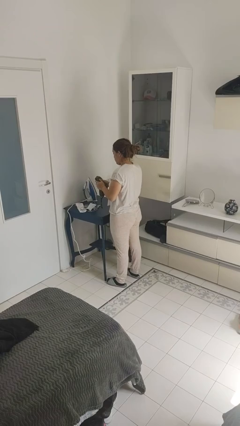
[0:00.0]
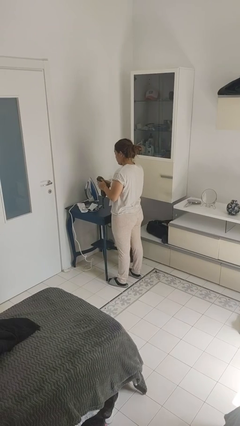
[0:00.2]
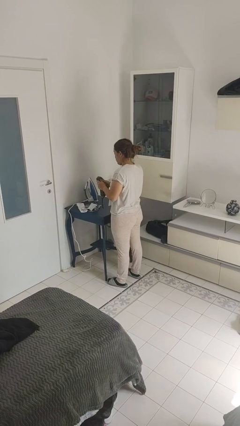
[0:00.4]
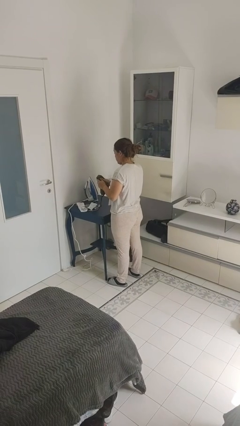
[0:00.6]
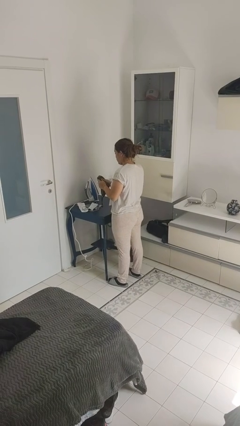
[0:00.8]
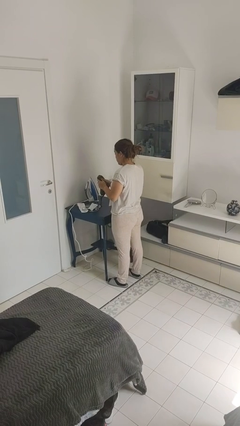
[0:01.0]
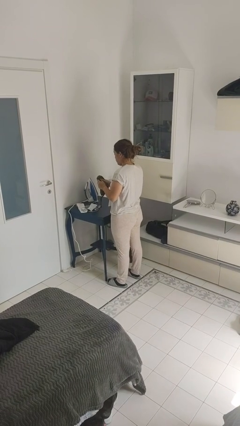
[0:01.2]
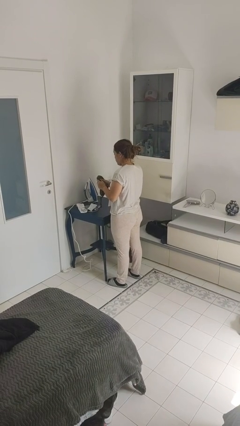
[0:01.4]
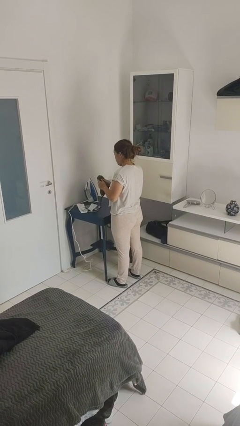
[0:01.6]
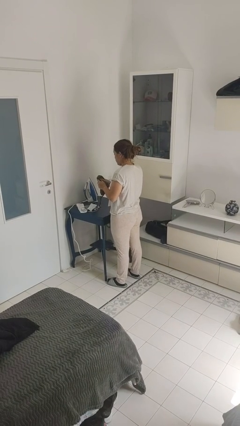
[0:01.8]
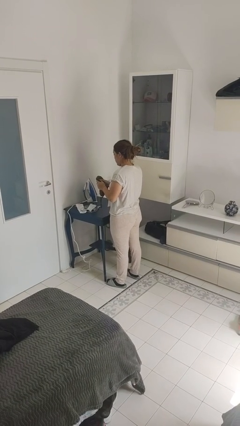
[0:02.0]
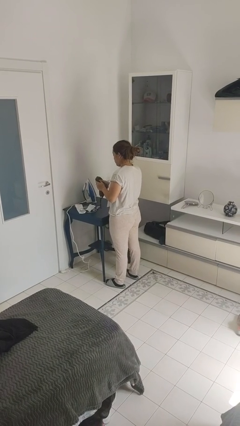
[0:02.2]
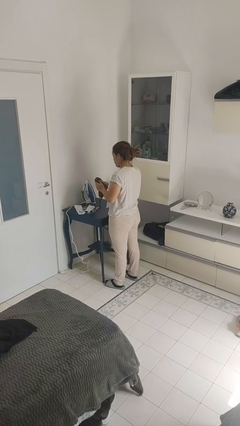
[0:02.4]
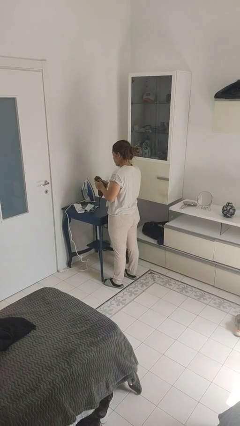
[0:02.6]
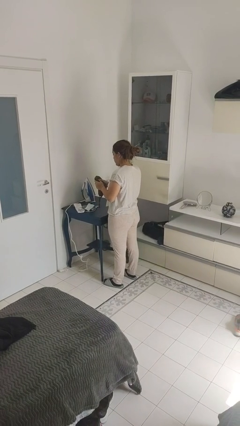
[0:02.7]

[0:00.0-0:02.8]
person squeezes object

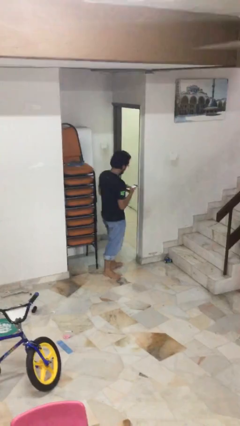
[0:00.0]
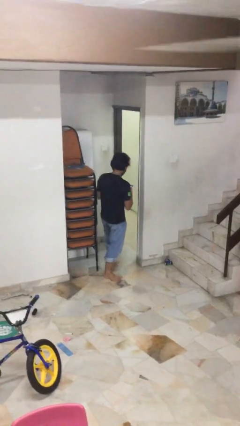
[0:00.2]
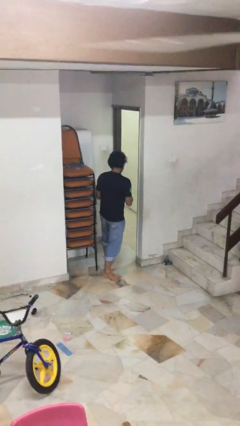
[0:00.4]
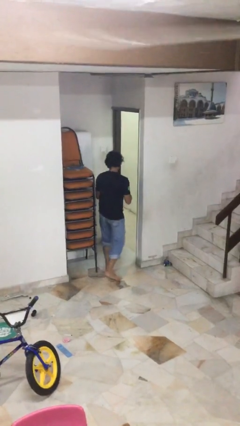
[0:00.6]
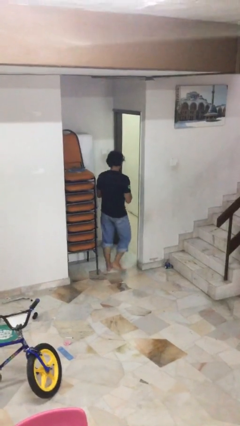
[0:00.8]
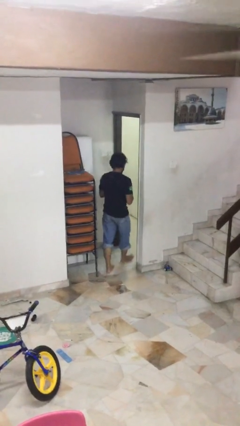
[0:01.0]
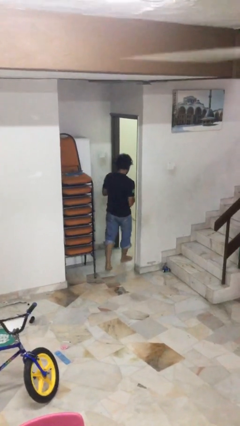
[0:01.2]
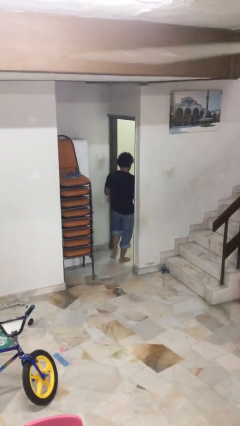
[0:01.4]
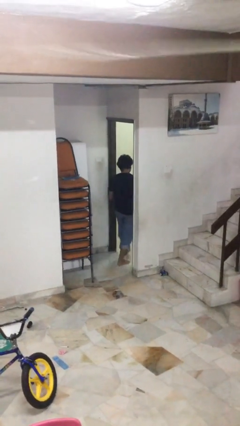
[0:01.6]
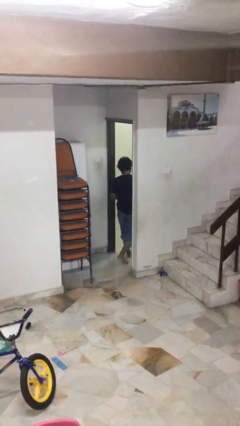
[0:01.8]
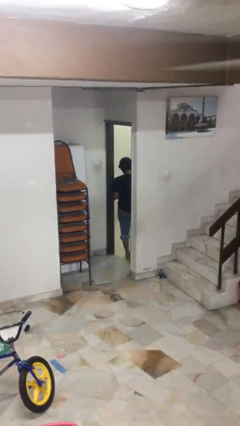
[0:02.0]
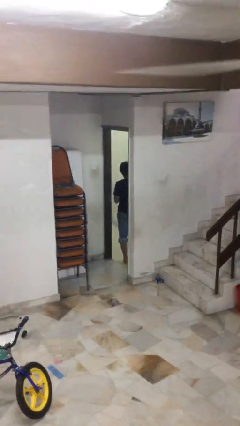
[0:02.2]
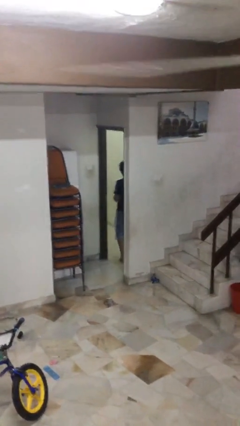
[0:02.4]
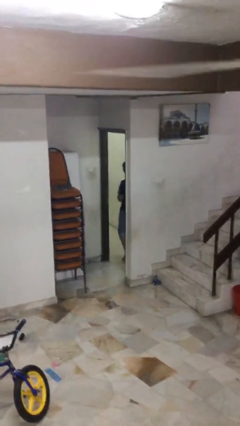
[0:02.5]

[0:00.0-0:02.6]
person exits scene through structure

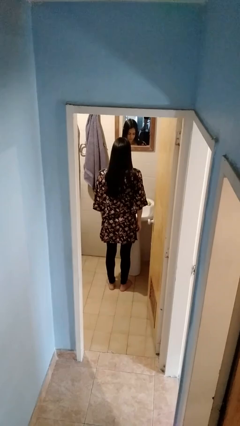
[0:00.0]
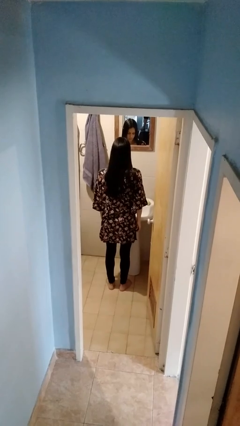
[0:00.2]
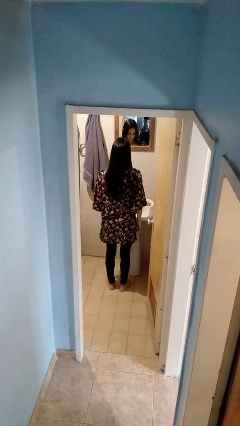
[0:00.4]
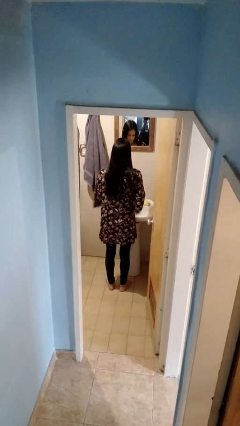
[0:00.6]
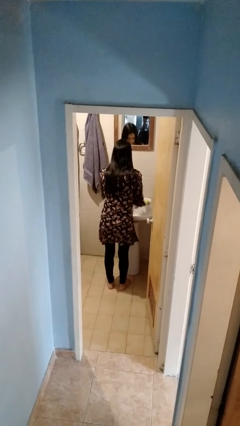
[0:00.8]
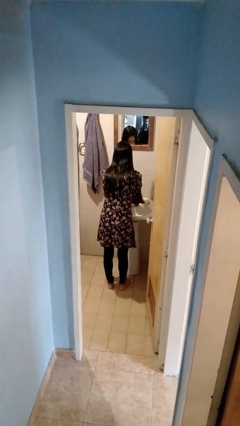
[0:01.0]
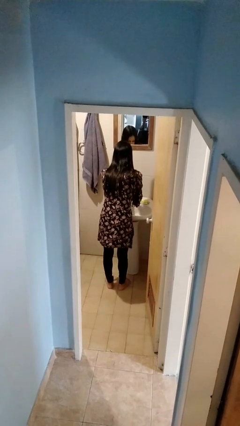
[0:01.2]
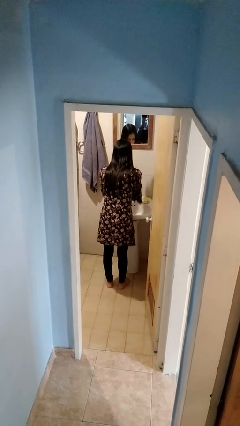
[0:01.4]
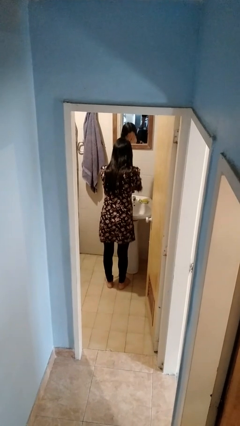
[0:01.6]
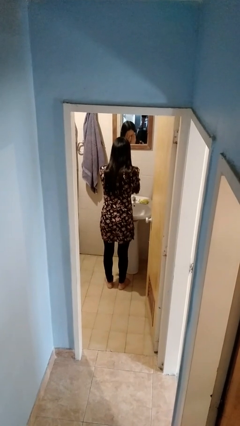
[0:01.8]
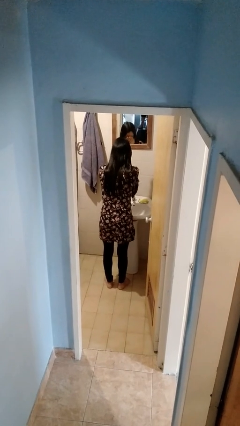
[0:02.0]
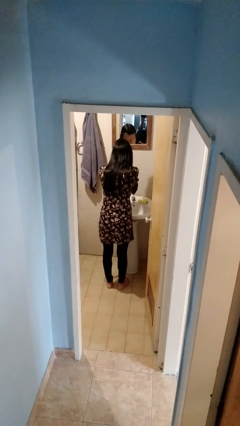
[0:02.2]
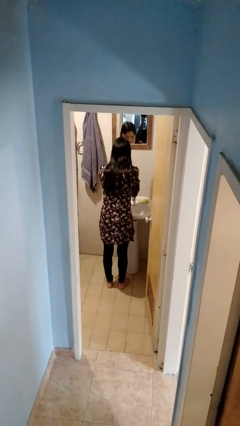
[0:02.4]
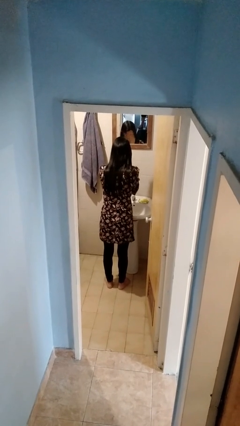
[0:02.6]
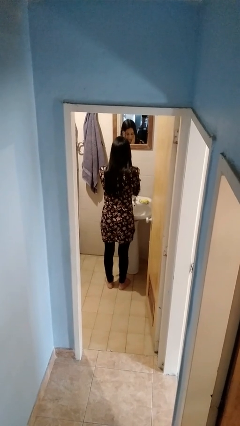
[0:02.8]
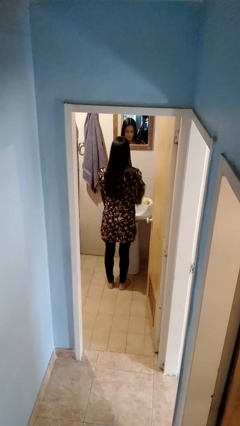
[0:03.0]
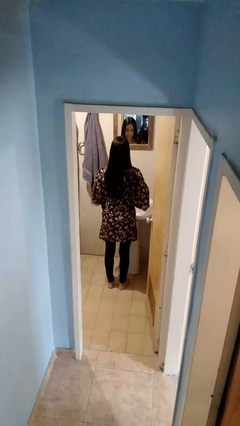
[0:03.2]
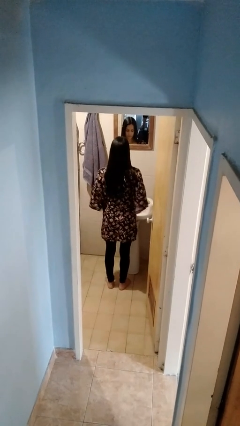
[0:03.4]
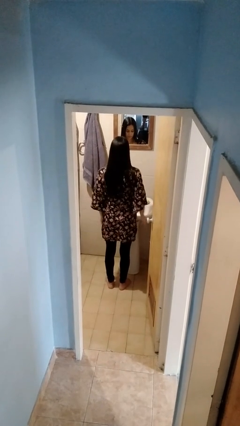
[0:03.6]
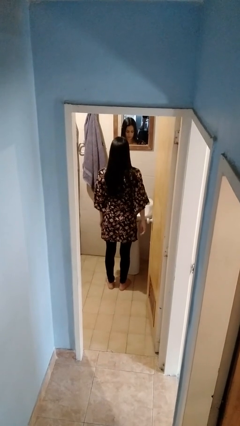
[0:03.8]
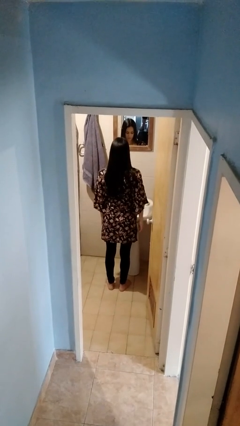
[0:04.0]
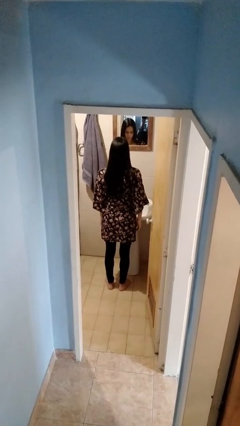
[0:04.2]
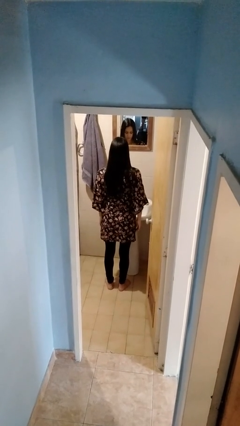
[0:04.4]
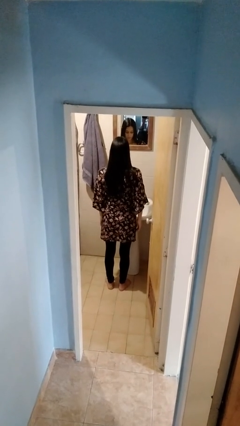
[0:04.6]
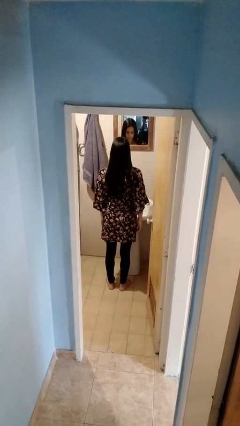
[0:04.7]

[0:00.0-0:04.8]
person washes face

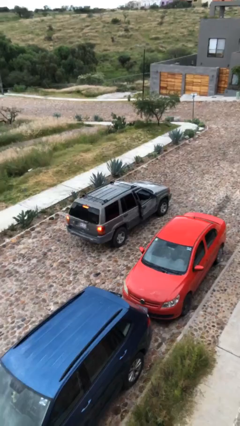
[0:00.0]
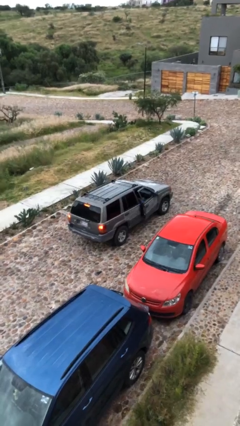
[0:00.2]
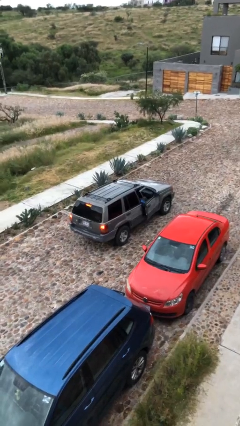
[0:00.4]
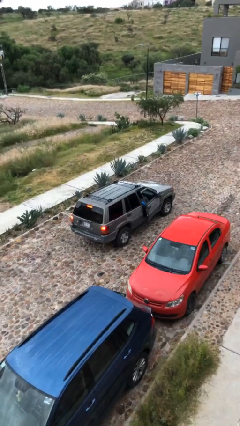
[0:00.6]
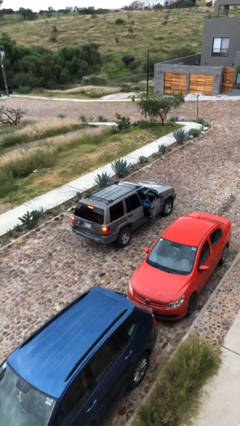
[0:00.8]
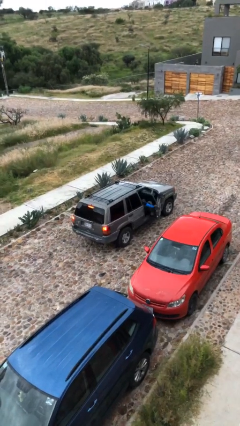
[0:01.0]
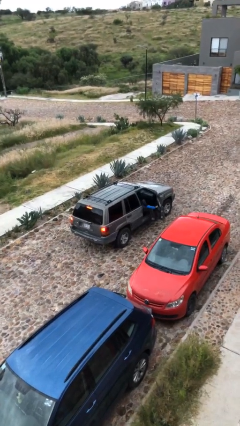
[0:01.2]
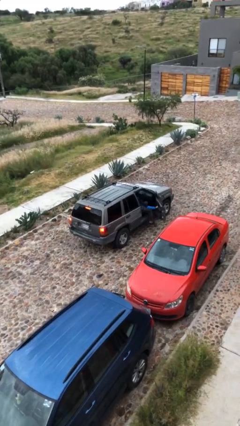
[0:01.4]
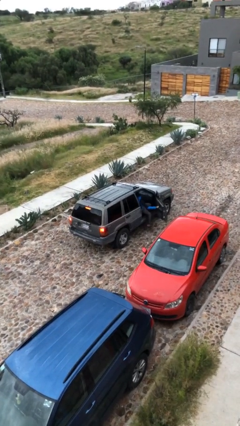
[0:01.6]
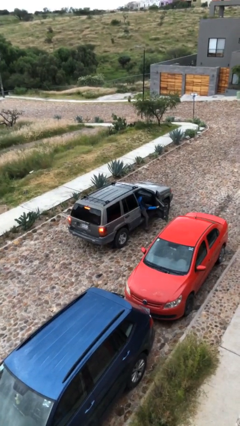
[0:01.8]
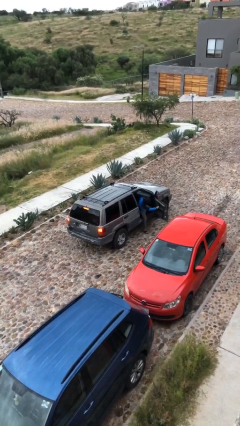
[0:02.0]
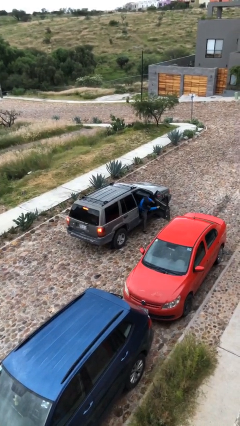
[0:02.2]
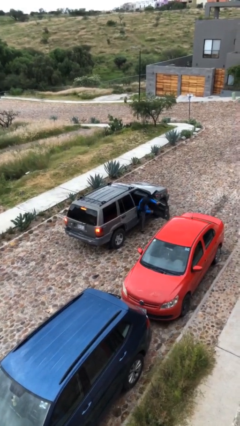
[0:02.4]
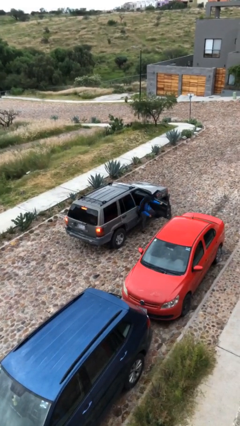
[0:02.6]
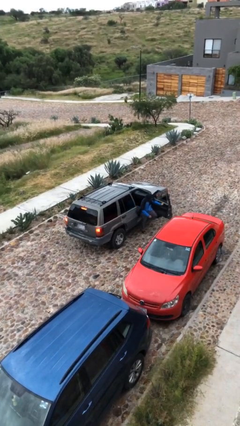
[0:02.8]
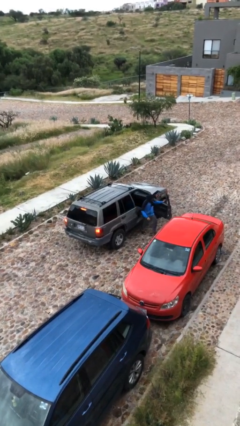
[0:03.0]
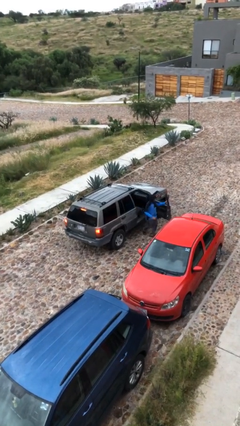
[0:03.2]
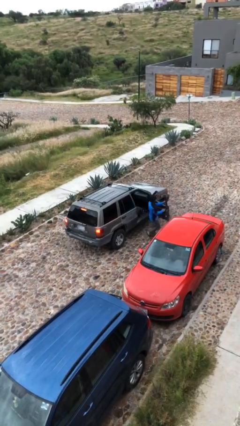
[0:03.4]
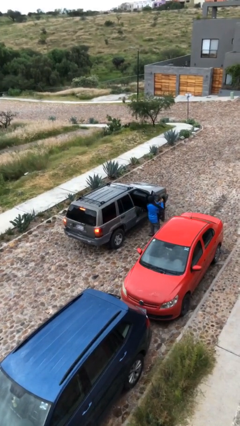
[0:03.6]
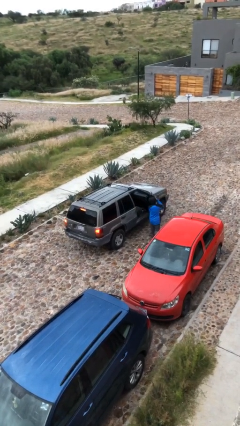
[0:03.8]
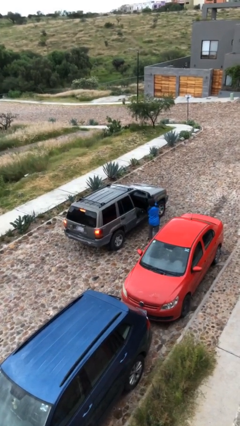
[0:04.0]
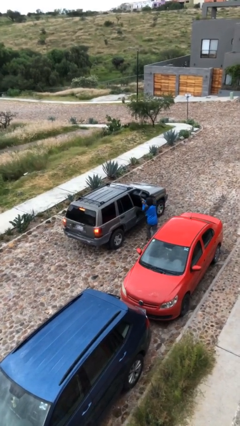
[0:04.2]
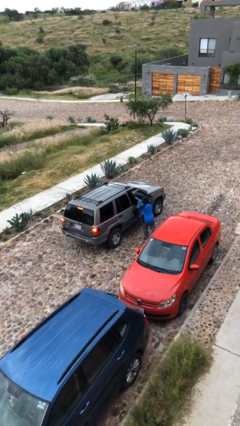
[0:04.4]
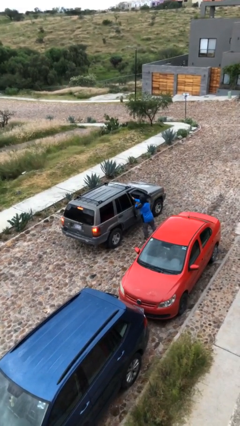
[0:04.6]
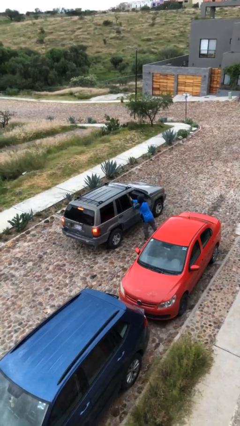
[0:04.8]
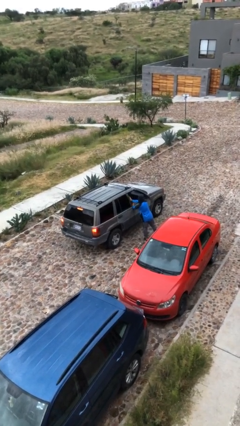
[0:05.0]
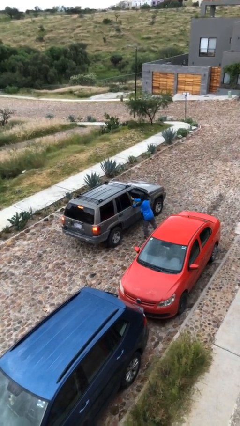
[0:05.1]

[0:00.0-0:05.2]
car drops off person

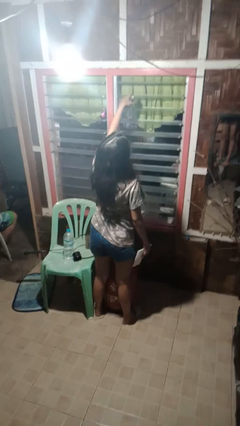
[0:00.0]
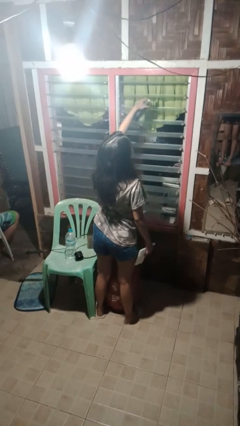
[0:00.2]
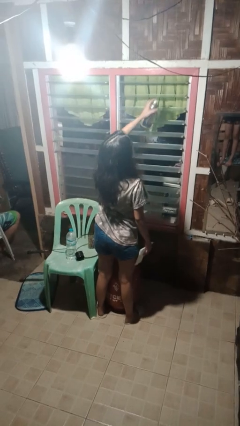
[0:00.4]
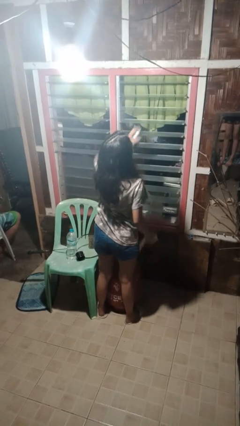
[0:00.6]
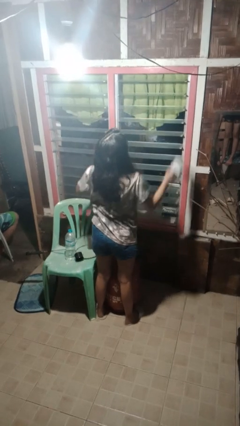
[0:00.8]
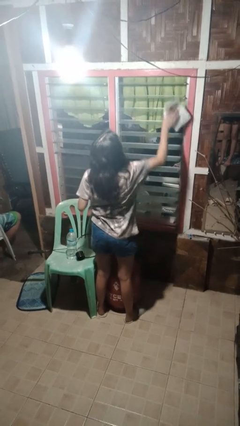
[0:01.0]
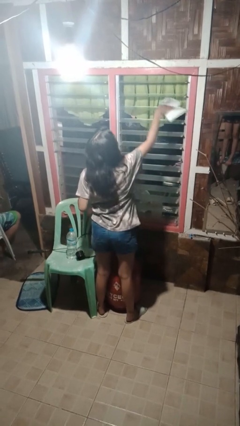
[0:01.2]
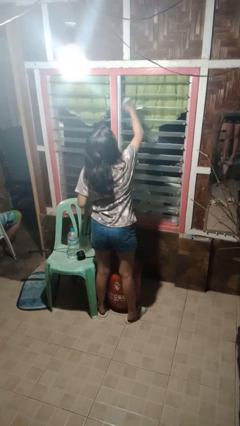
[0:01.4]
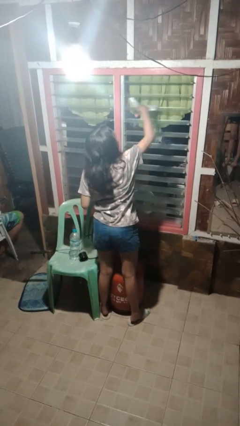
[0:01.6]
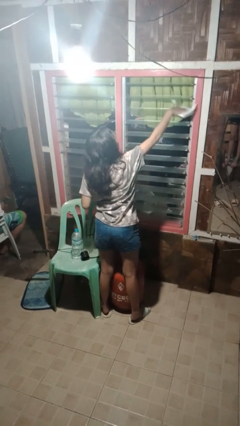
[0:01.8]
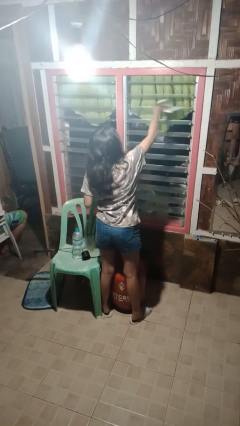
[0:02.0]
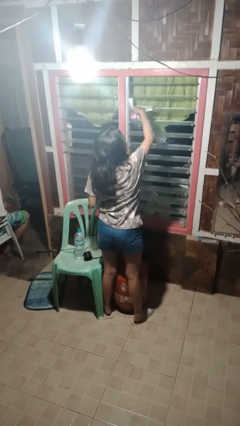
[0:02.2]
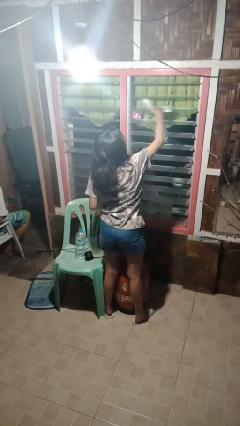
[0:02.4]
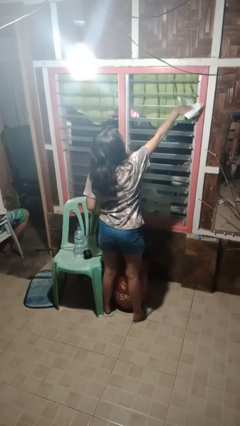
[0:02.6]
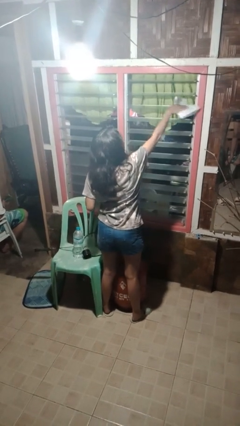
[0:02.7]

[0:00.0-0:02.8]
person washes window
